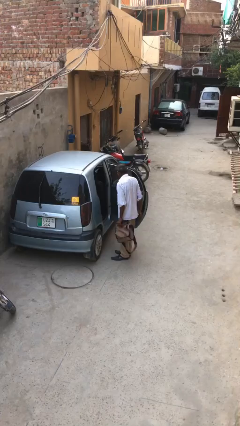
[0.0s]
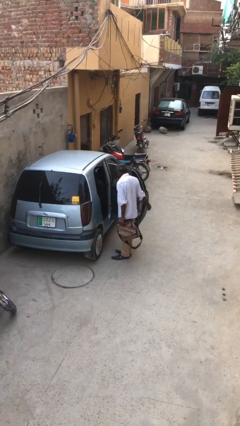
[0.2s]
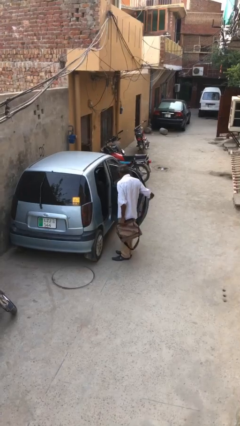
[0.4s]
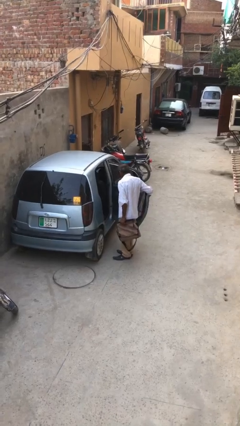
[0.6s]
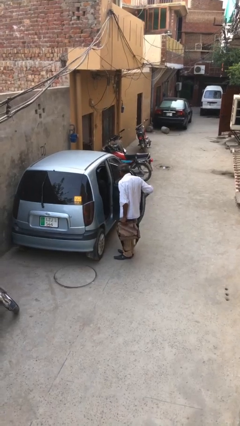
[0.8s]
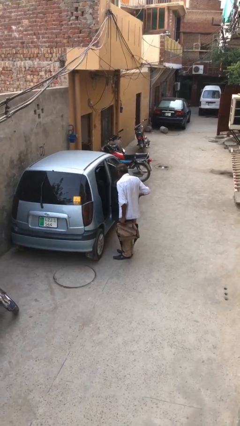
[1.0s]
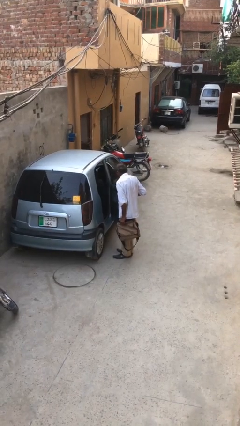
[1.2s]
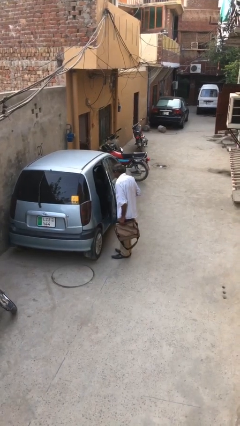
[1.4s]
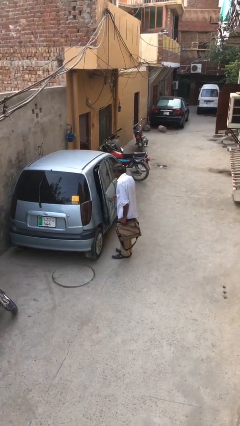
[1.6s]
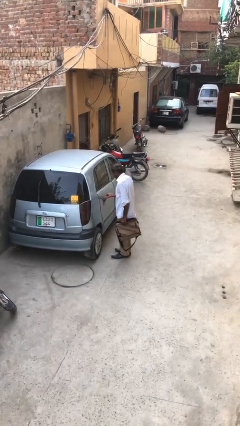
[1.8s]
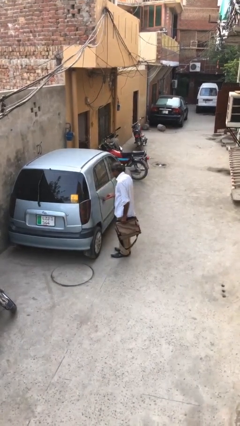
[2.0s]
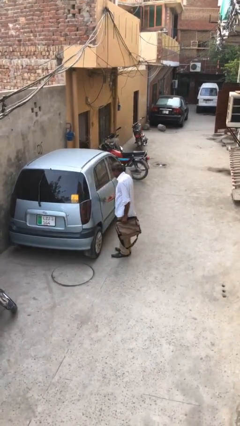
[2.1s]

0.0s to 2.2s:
person closes car door

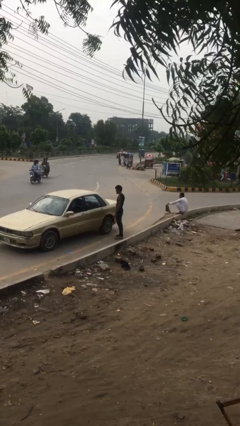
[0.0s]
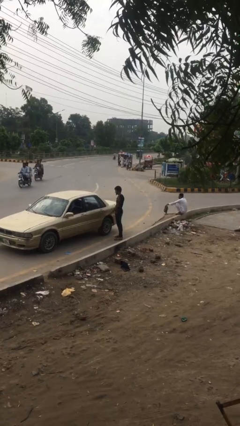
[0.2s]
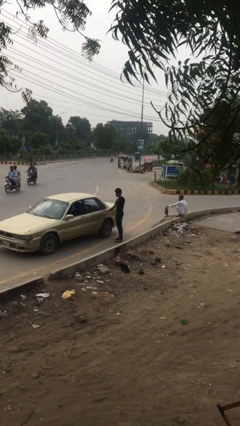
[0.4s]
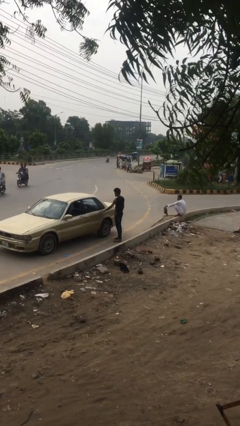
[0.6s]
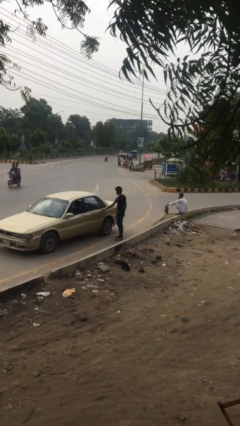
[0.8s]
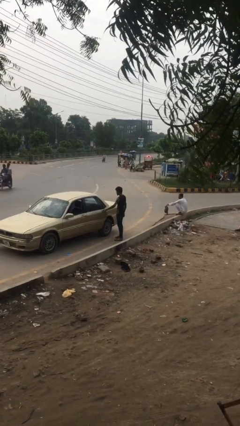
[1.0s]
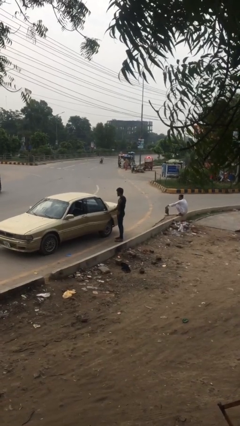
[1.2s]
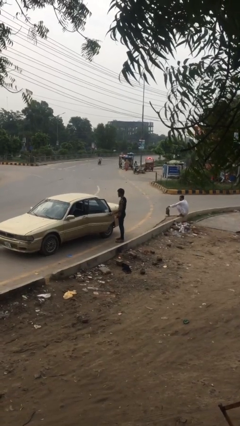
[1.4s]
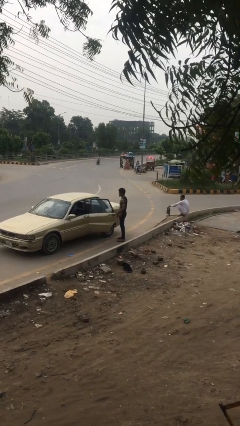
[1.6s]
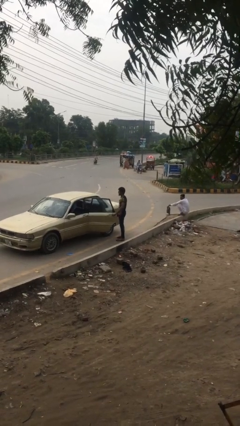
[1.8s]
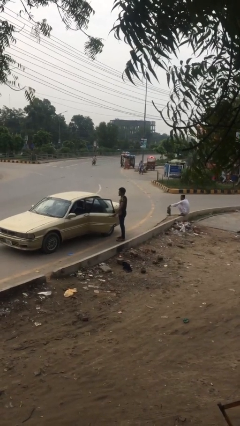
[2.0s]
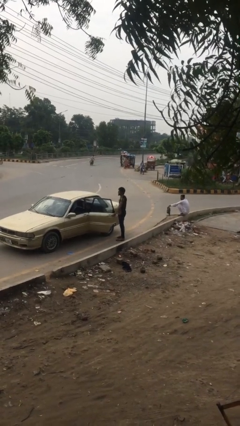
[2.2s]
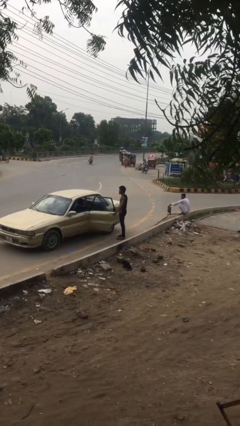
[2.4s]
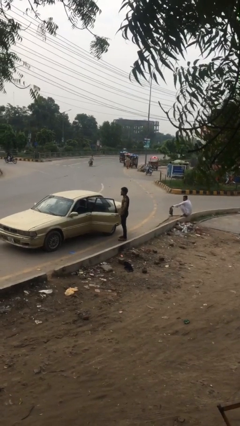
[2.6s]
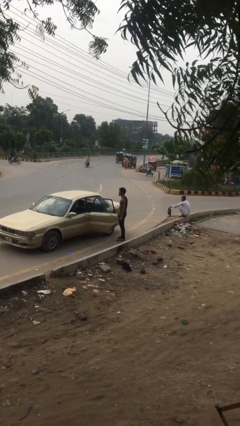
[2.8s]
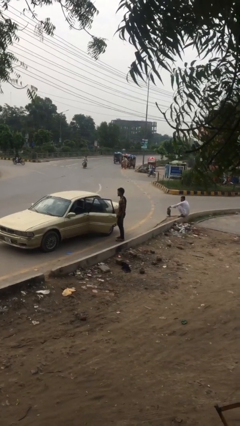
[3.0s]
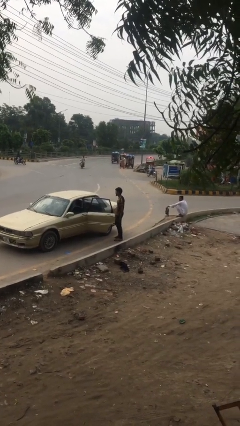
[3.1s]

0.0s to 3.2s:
person opens car door

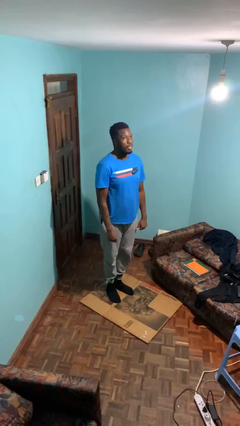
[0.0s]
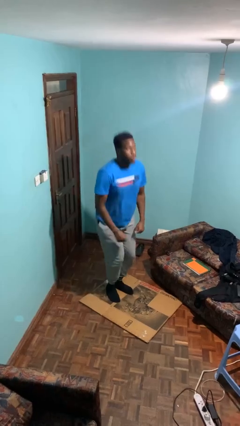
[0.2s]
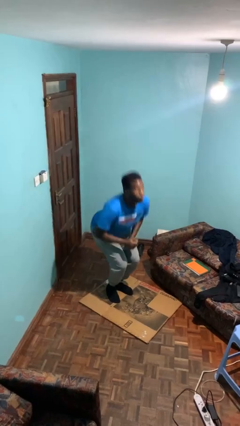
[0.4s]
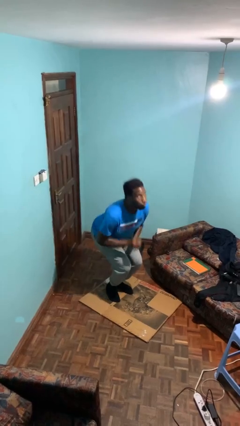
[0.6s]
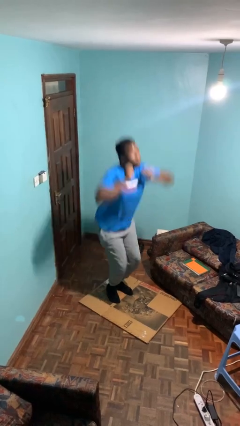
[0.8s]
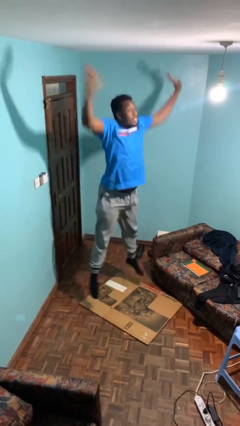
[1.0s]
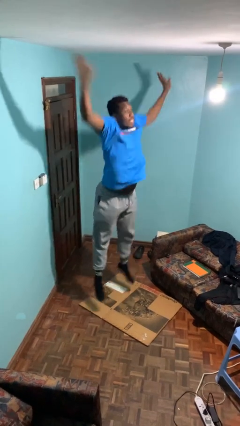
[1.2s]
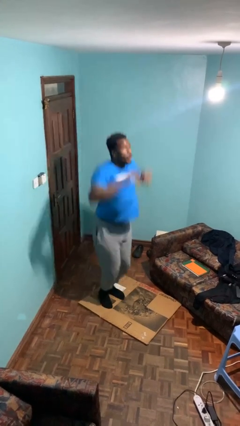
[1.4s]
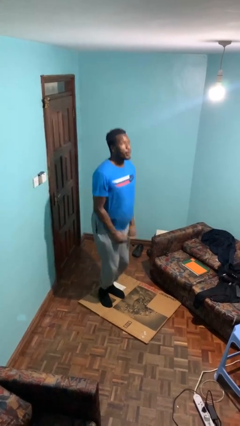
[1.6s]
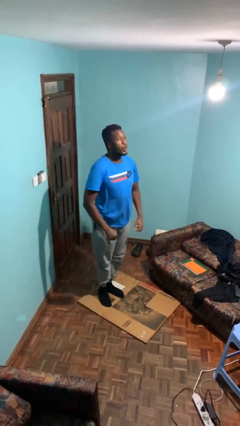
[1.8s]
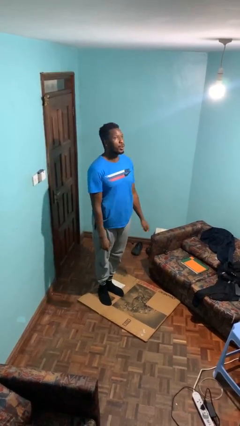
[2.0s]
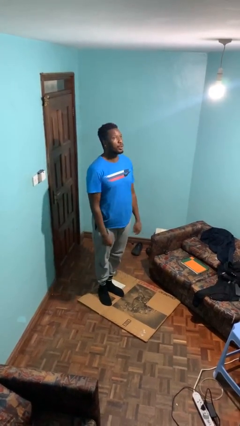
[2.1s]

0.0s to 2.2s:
person exercises with jumping jacks

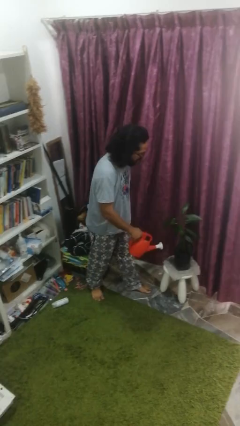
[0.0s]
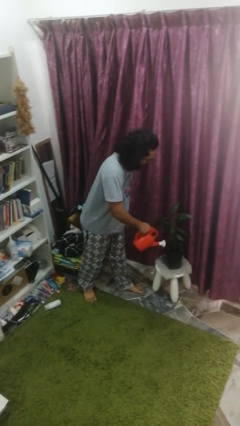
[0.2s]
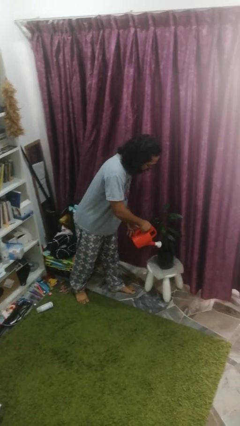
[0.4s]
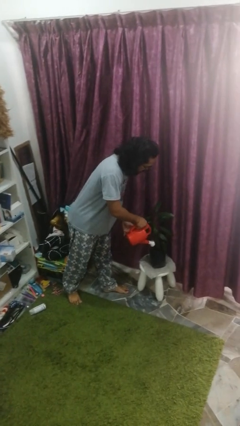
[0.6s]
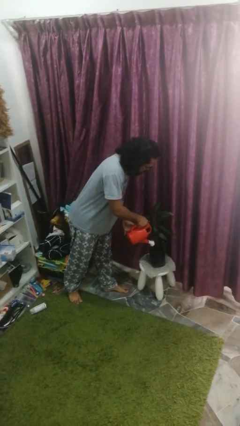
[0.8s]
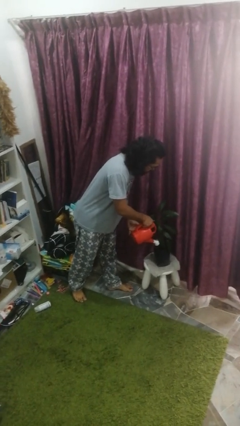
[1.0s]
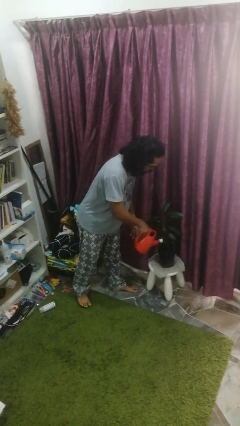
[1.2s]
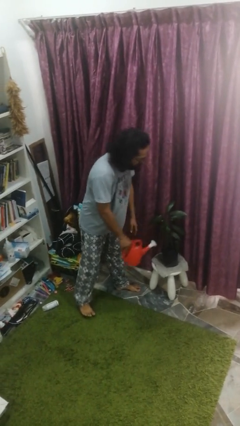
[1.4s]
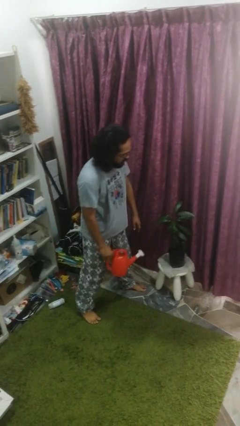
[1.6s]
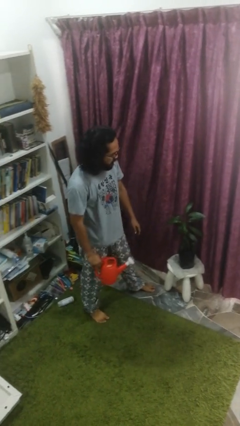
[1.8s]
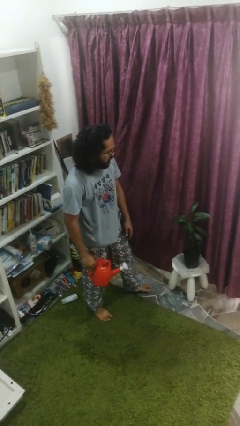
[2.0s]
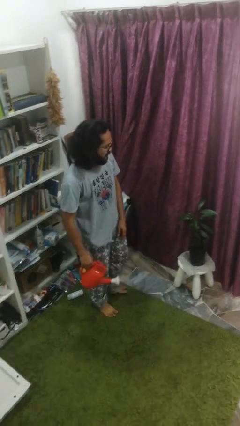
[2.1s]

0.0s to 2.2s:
person waters houseplant

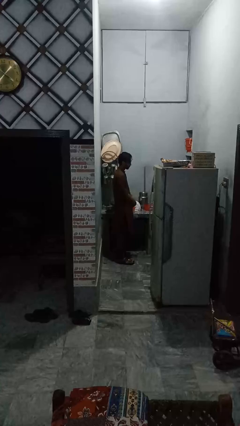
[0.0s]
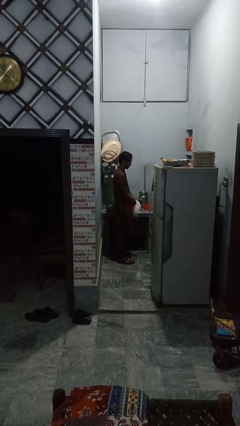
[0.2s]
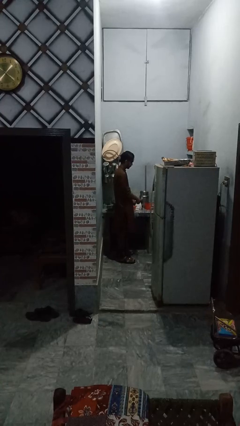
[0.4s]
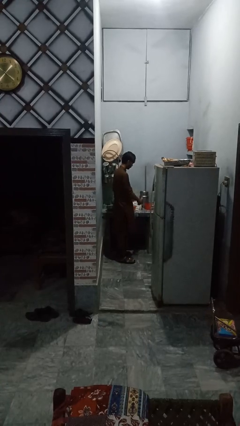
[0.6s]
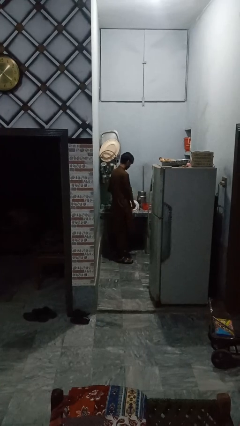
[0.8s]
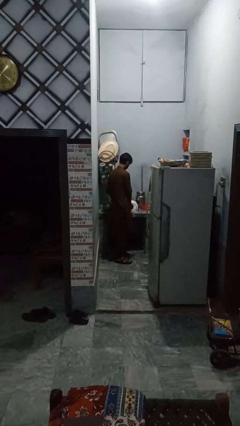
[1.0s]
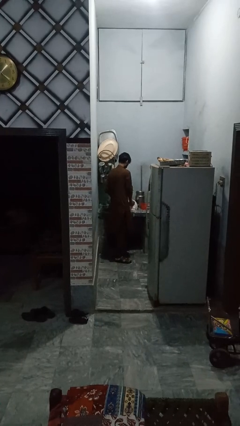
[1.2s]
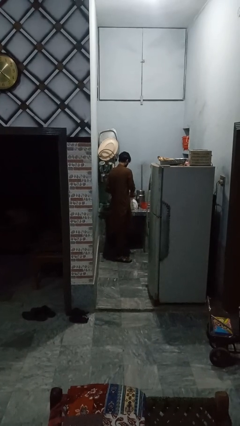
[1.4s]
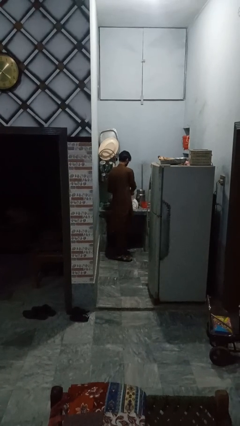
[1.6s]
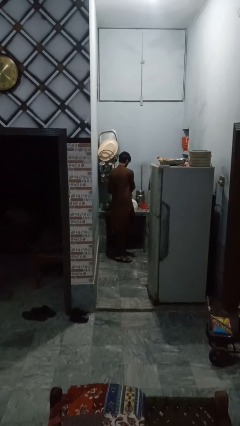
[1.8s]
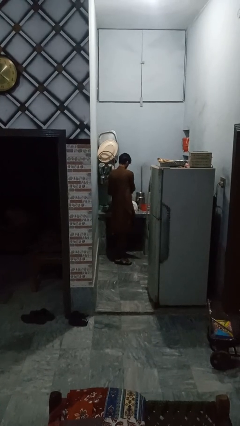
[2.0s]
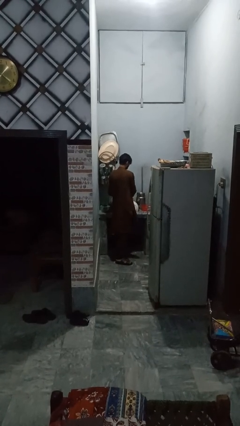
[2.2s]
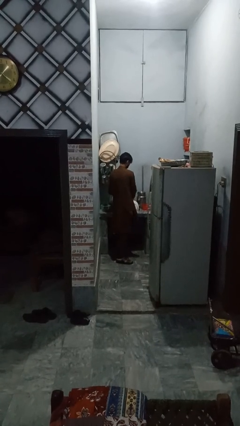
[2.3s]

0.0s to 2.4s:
person loads dishwasher

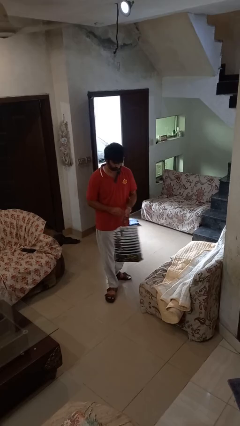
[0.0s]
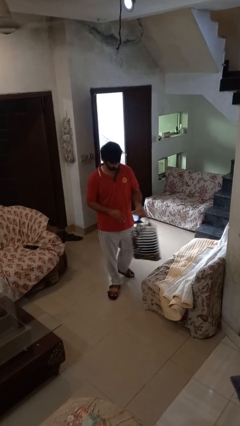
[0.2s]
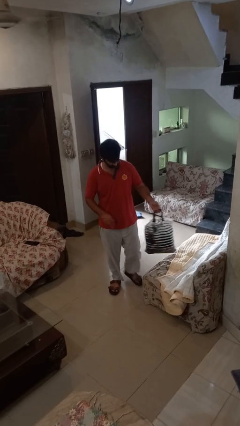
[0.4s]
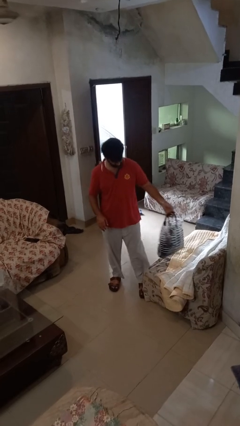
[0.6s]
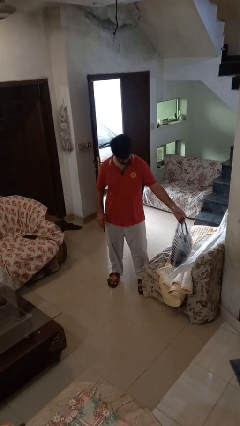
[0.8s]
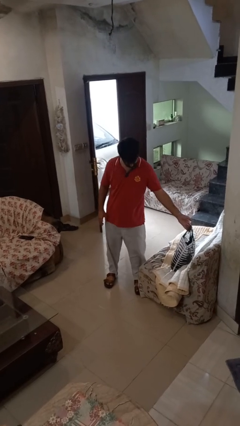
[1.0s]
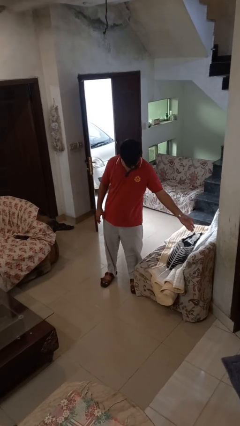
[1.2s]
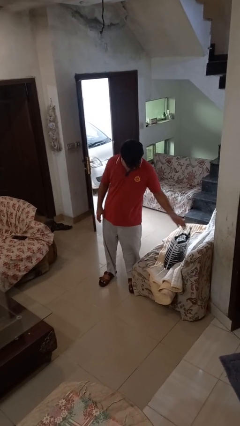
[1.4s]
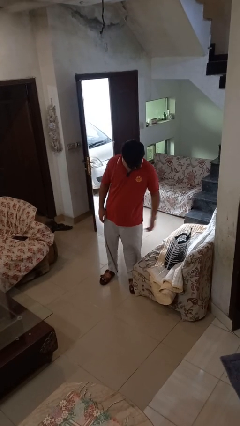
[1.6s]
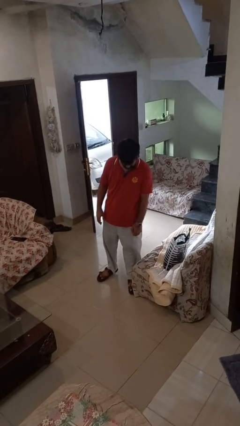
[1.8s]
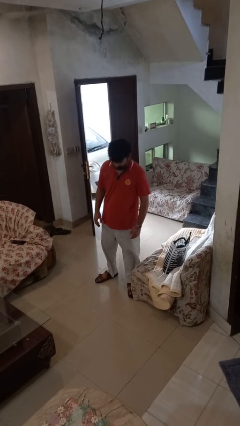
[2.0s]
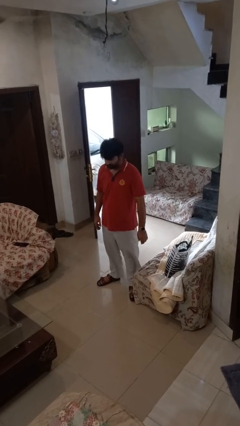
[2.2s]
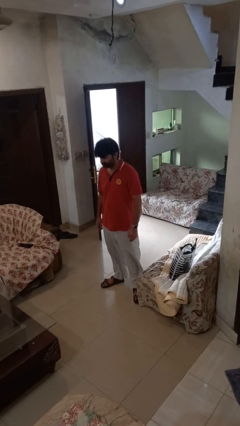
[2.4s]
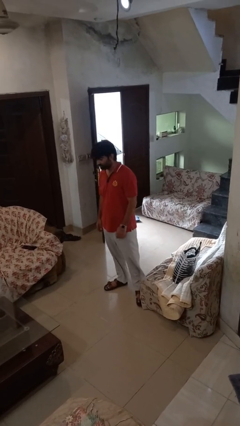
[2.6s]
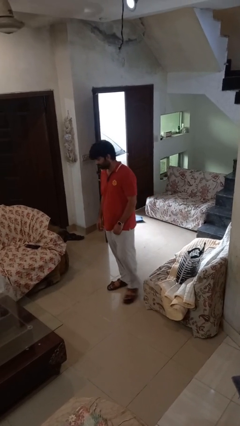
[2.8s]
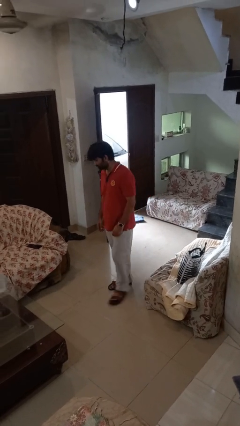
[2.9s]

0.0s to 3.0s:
person puts down object on couch

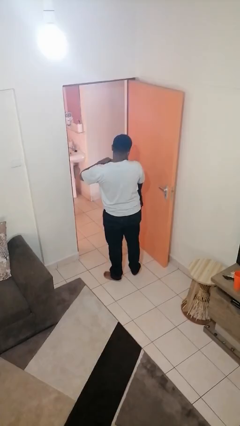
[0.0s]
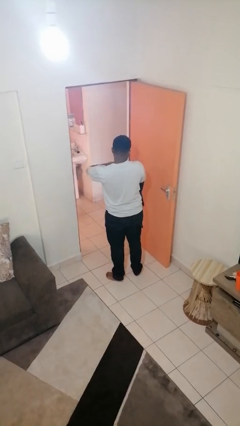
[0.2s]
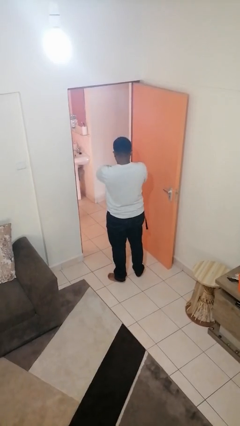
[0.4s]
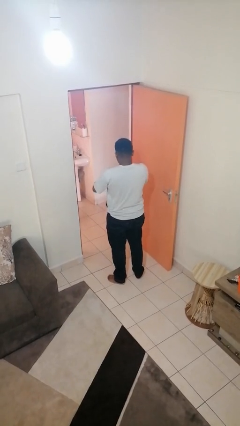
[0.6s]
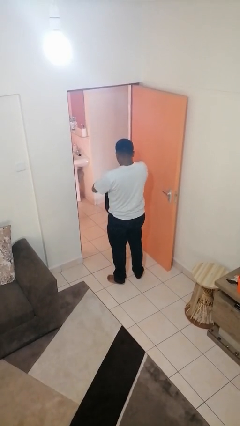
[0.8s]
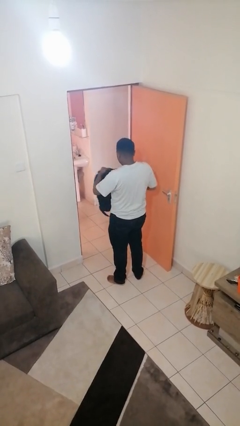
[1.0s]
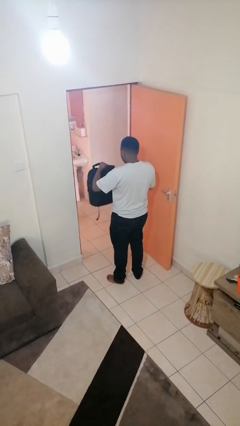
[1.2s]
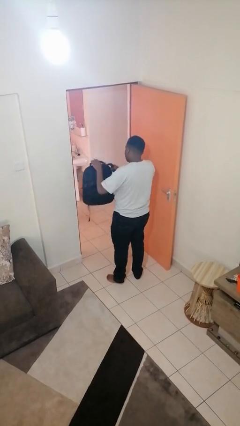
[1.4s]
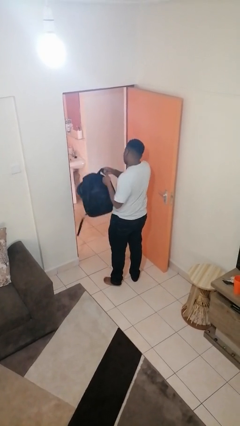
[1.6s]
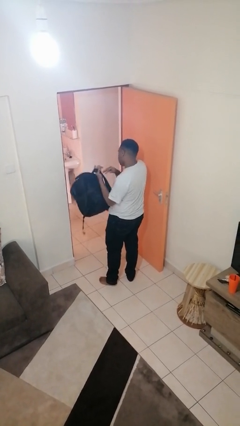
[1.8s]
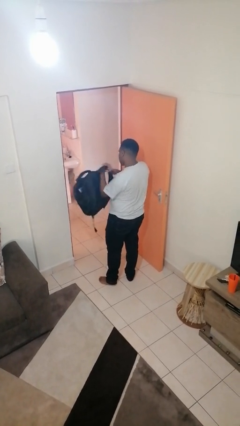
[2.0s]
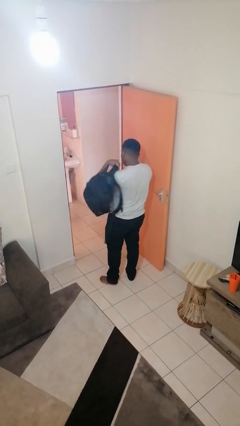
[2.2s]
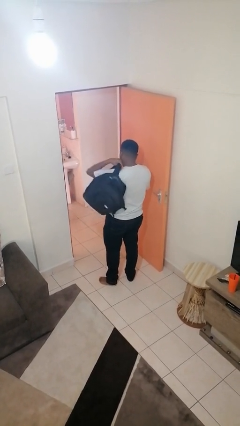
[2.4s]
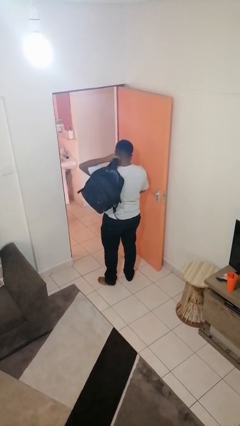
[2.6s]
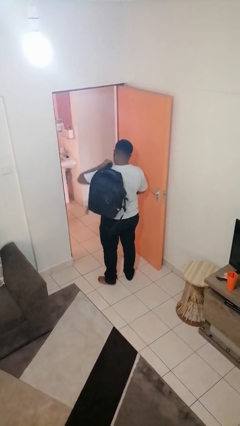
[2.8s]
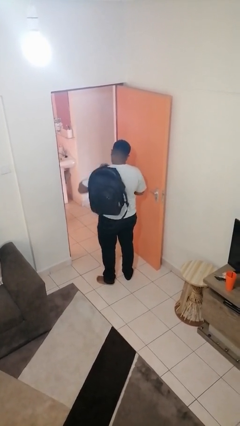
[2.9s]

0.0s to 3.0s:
person puts object into backpack
